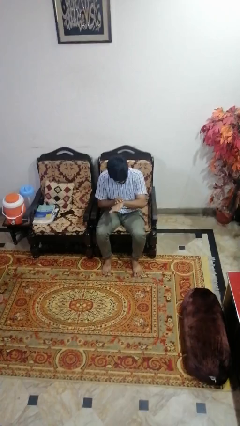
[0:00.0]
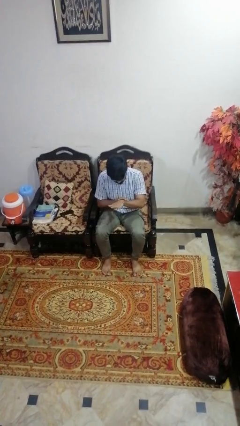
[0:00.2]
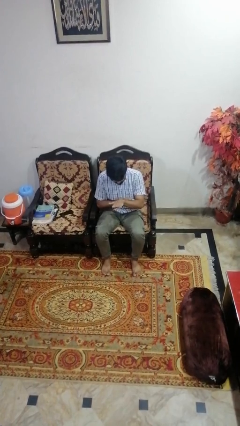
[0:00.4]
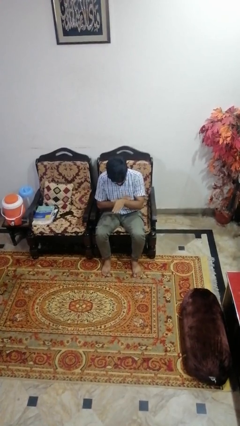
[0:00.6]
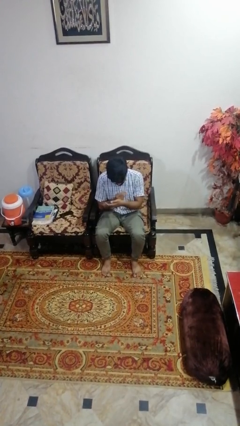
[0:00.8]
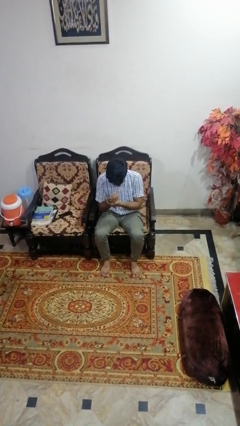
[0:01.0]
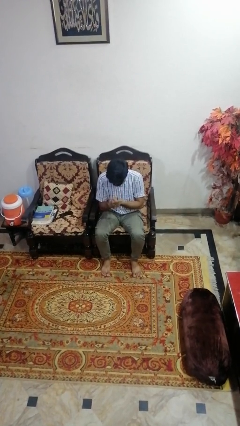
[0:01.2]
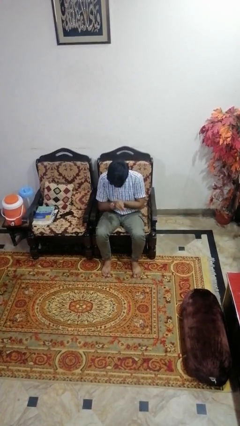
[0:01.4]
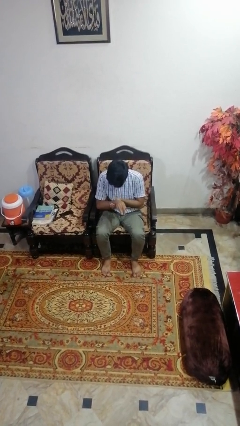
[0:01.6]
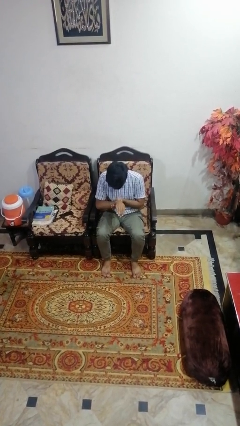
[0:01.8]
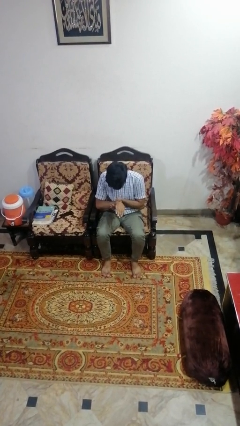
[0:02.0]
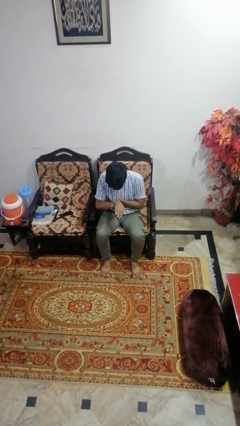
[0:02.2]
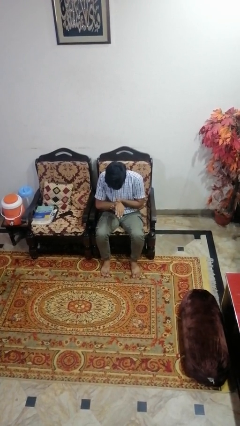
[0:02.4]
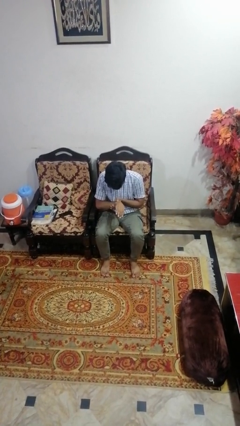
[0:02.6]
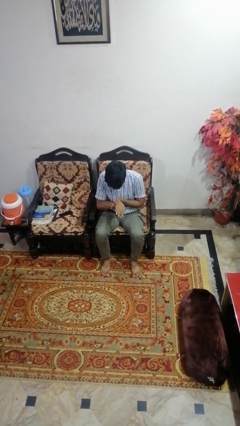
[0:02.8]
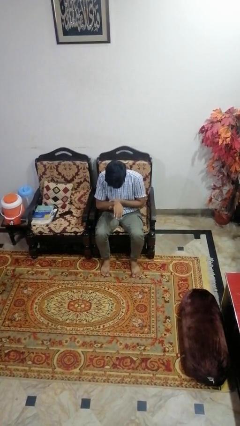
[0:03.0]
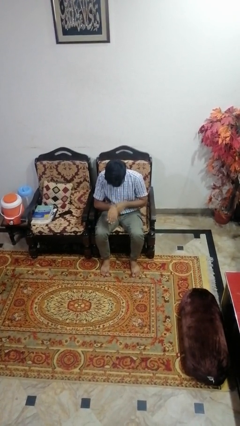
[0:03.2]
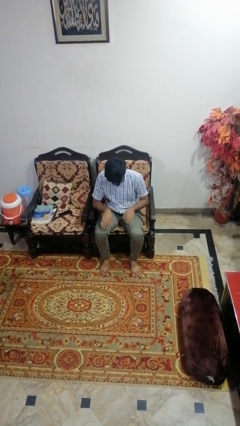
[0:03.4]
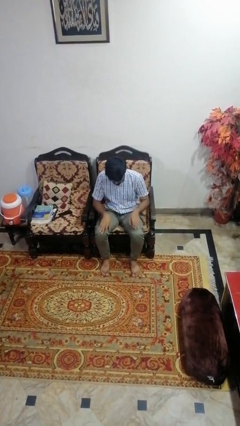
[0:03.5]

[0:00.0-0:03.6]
person looks at hands in lap

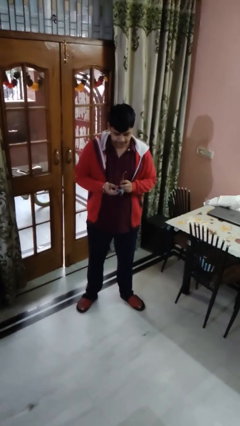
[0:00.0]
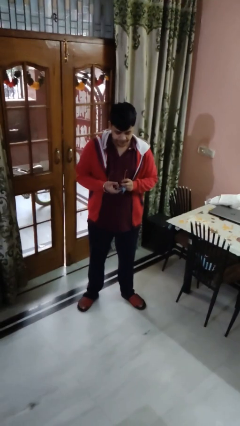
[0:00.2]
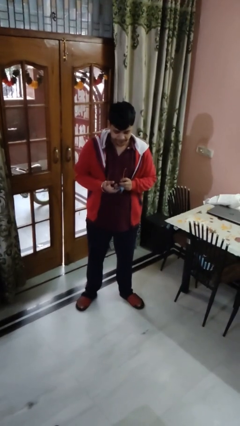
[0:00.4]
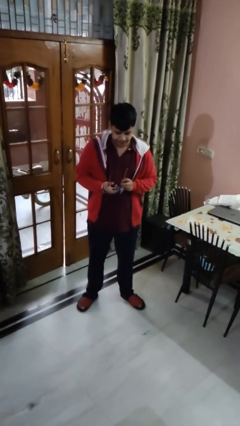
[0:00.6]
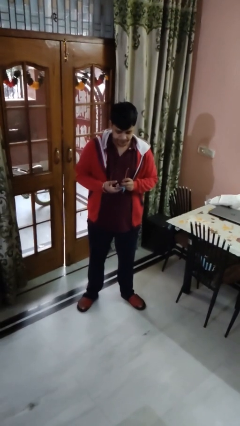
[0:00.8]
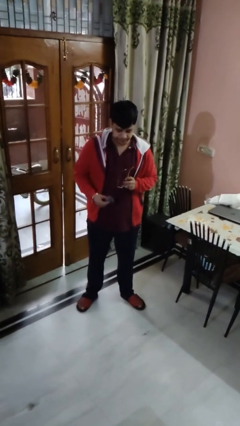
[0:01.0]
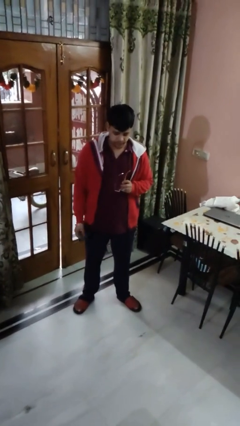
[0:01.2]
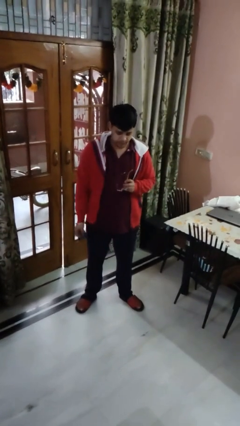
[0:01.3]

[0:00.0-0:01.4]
person cleans eyeglasses

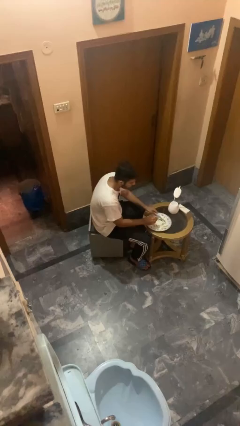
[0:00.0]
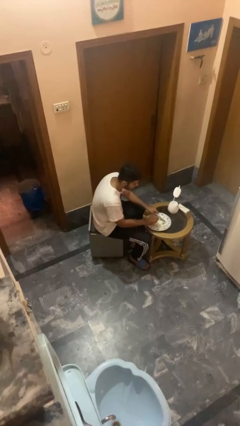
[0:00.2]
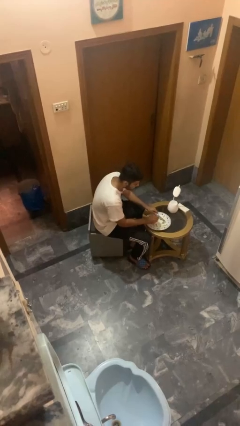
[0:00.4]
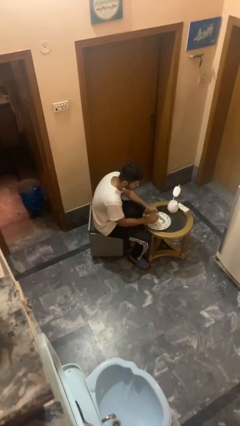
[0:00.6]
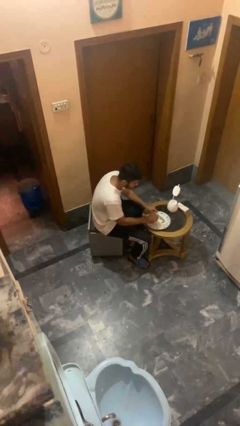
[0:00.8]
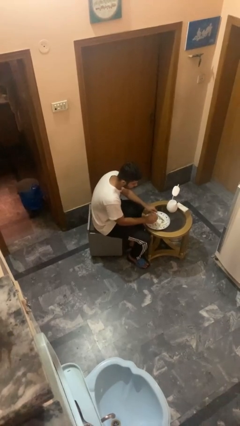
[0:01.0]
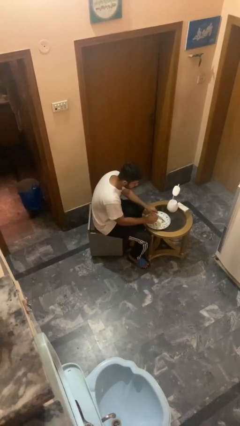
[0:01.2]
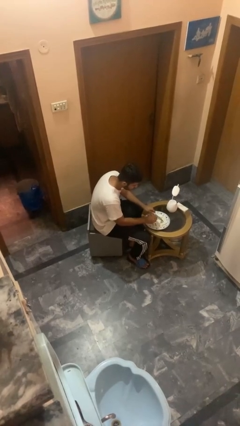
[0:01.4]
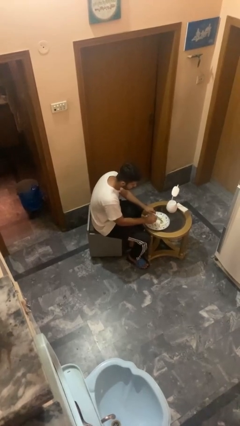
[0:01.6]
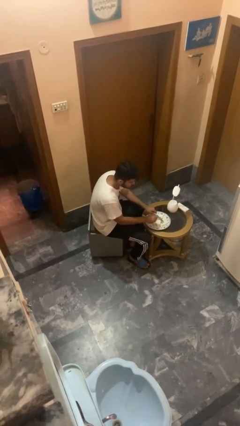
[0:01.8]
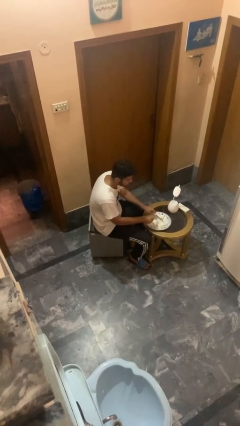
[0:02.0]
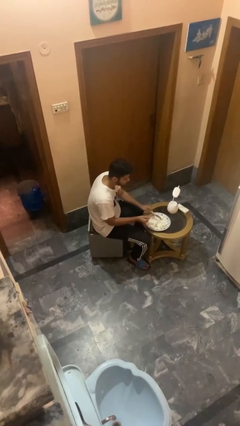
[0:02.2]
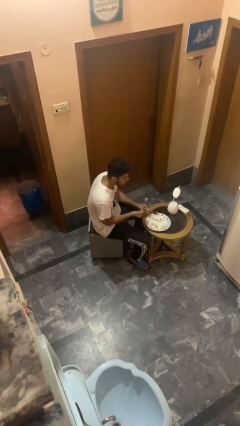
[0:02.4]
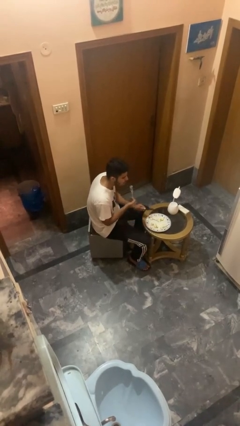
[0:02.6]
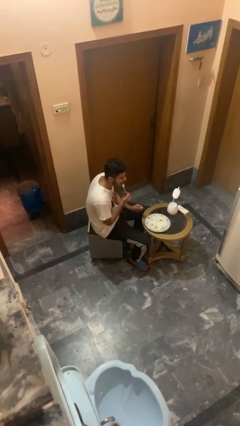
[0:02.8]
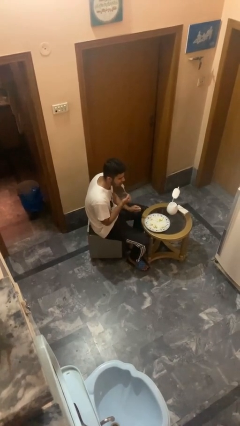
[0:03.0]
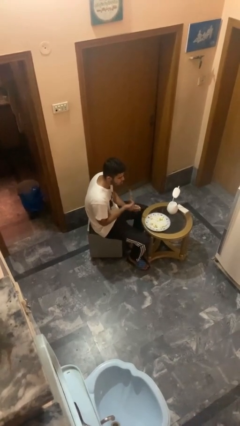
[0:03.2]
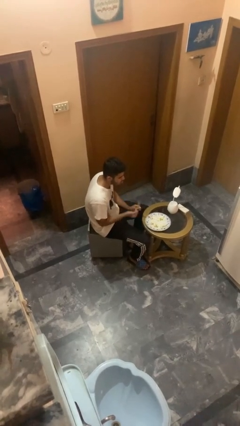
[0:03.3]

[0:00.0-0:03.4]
person eats with utensil

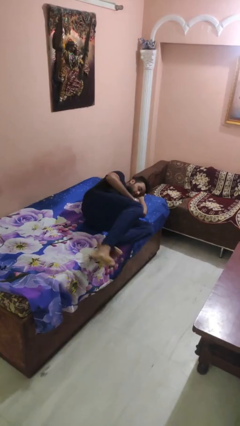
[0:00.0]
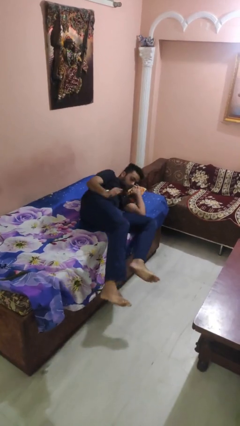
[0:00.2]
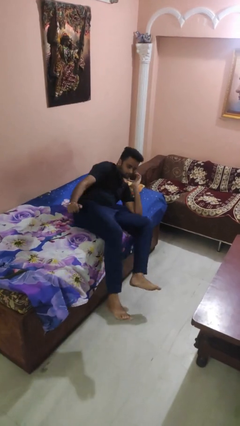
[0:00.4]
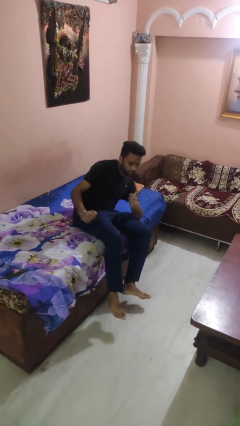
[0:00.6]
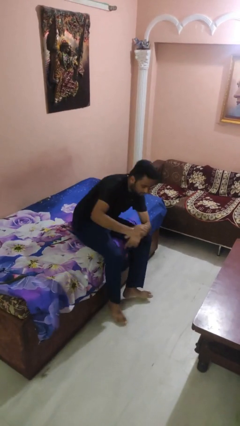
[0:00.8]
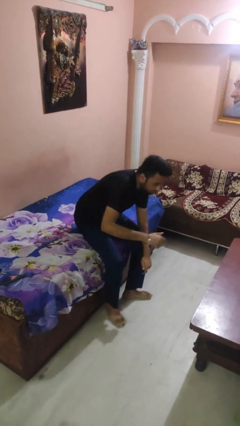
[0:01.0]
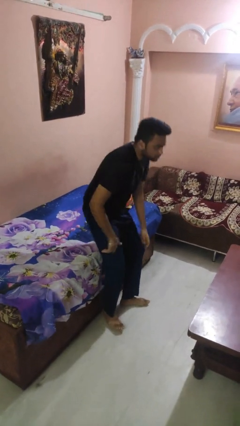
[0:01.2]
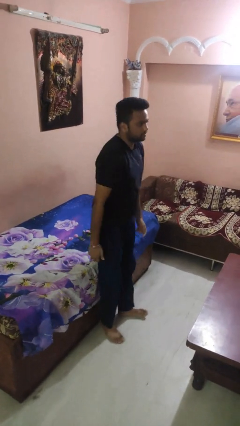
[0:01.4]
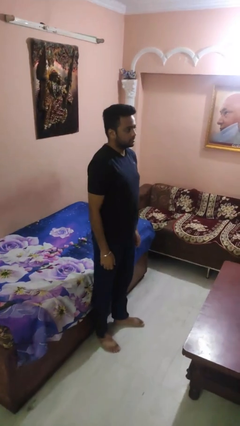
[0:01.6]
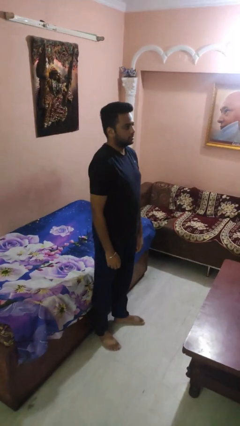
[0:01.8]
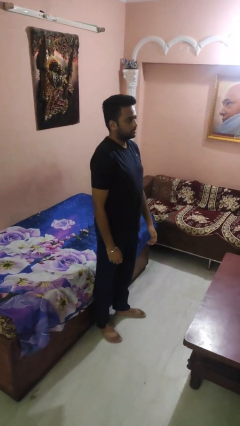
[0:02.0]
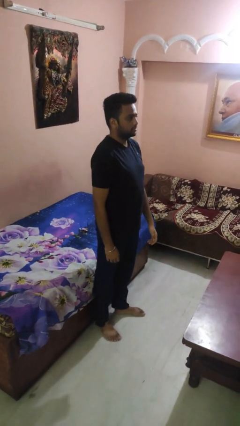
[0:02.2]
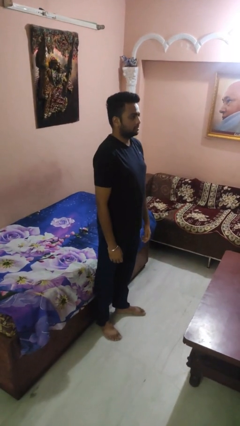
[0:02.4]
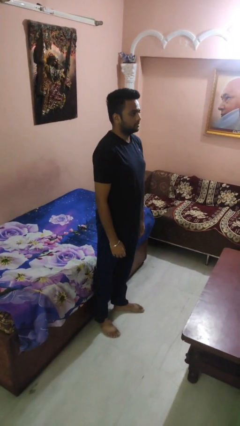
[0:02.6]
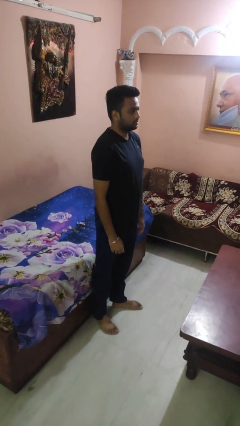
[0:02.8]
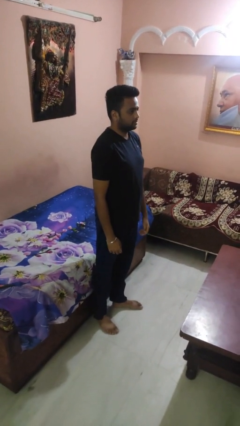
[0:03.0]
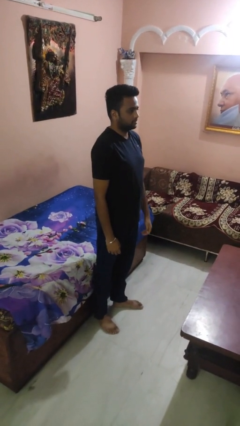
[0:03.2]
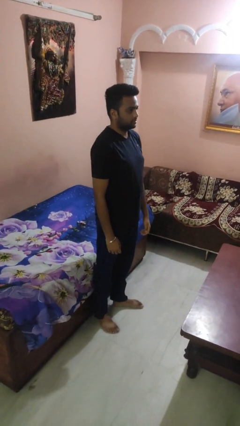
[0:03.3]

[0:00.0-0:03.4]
person stands up

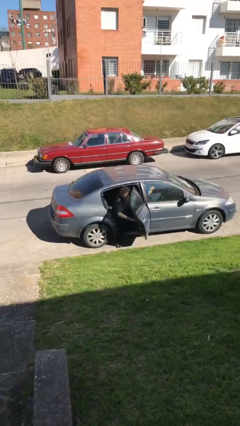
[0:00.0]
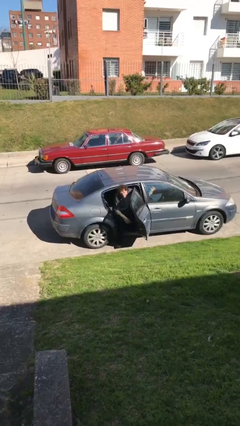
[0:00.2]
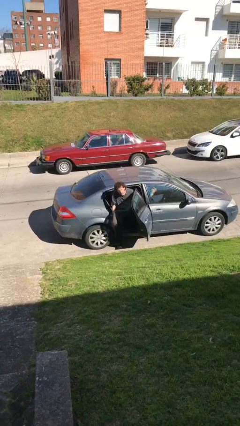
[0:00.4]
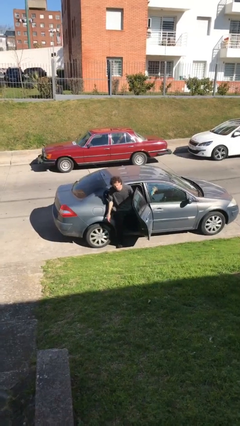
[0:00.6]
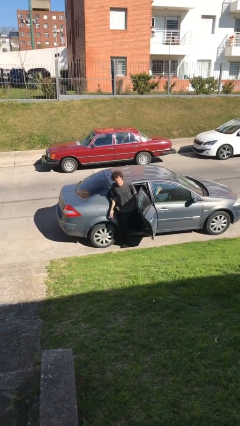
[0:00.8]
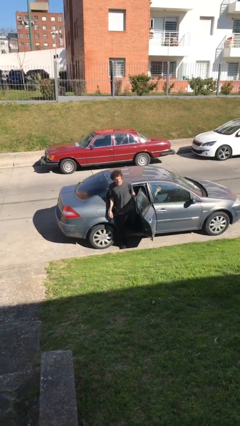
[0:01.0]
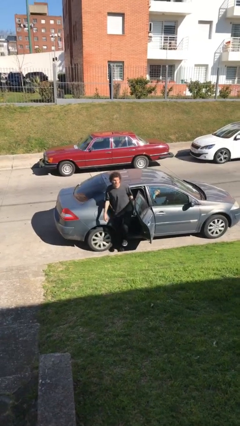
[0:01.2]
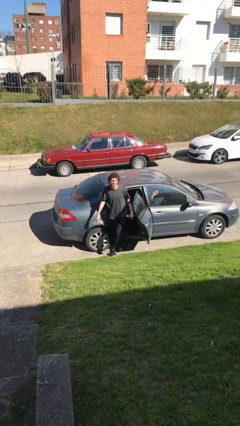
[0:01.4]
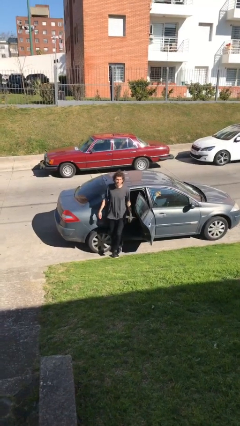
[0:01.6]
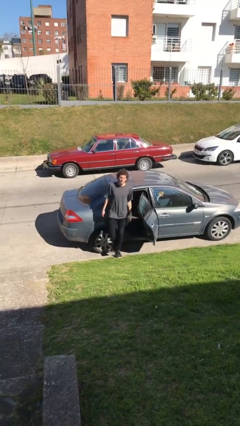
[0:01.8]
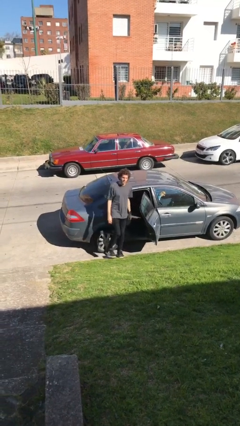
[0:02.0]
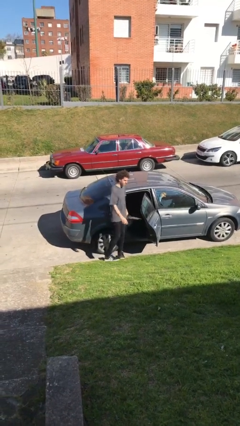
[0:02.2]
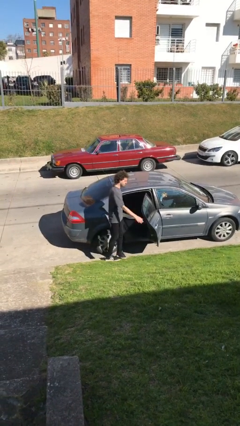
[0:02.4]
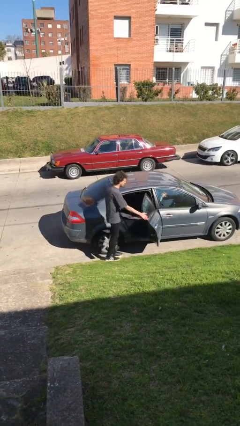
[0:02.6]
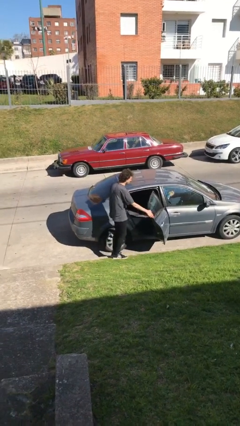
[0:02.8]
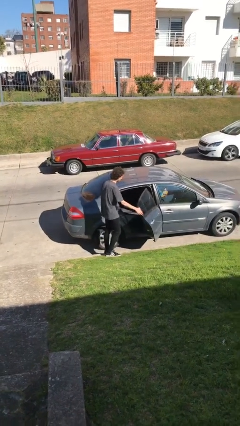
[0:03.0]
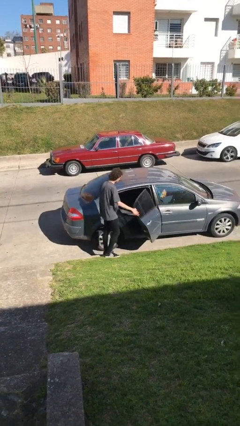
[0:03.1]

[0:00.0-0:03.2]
person exits car

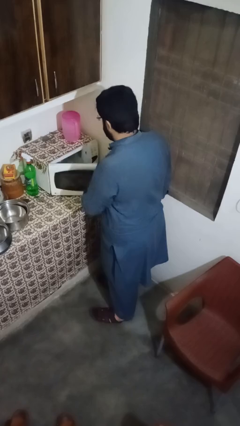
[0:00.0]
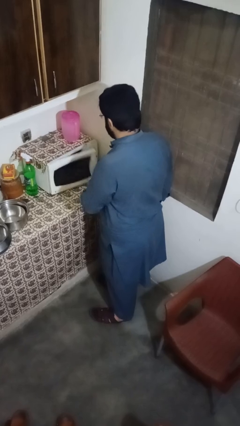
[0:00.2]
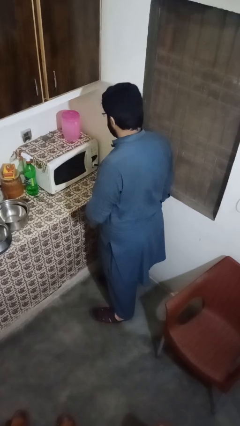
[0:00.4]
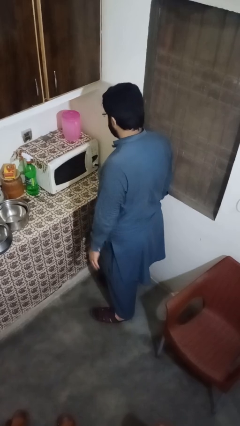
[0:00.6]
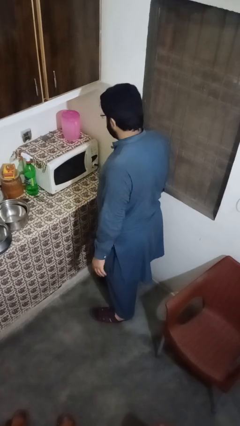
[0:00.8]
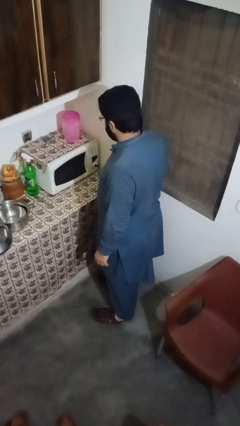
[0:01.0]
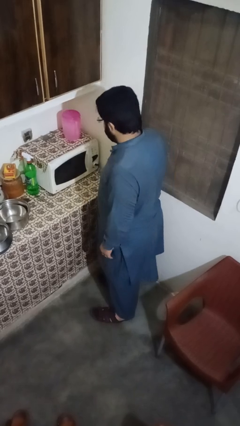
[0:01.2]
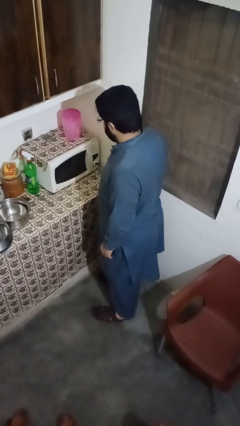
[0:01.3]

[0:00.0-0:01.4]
person closes microwave

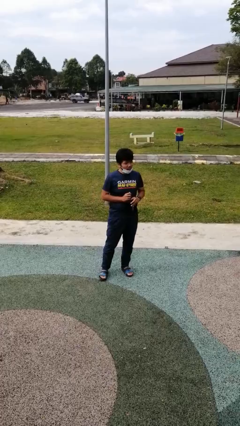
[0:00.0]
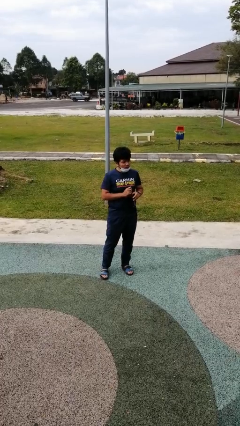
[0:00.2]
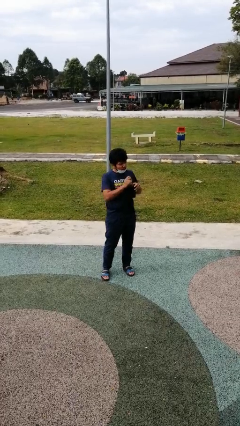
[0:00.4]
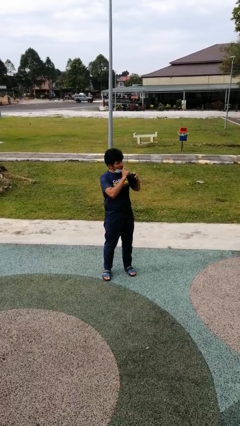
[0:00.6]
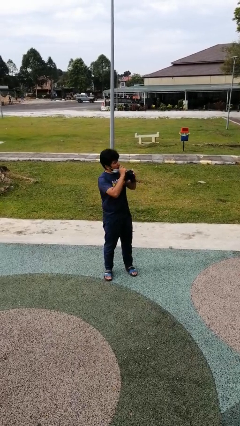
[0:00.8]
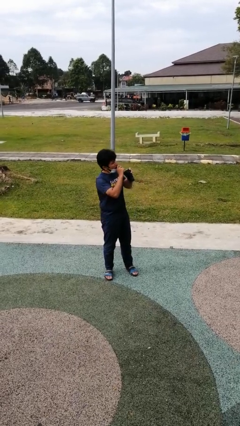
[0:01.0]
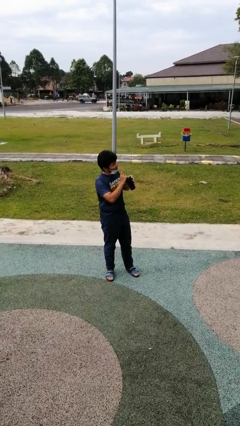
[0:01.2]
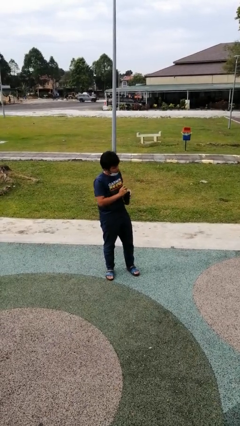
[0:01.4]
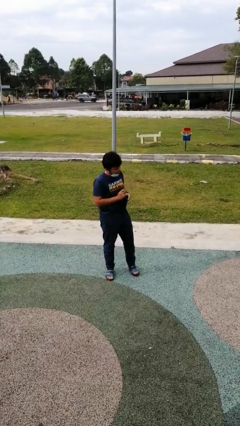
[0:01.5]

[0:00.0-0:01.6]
person drinks from straw
